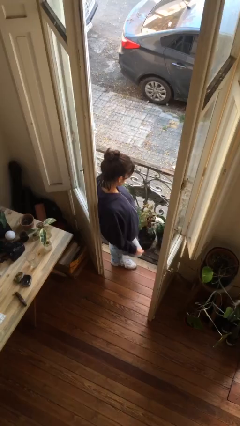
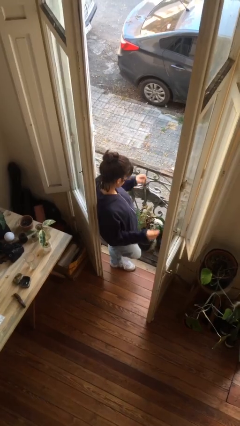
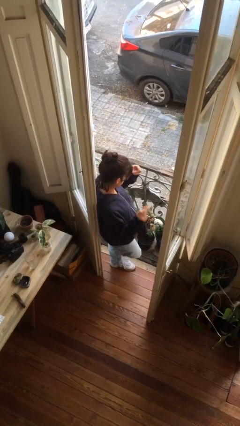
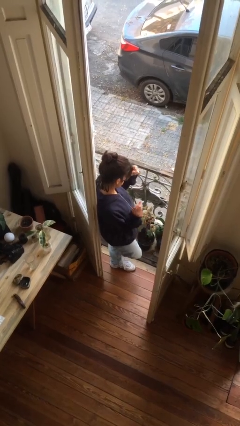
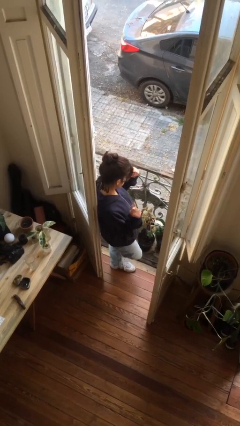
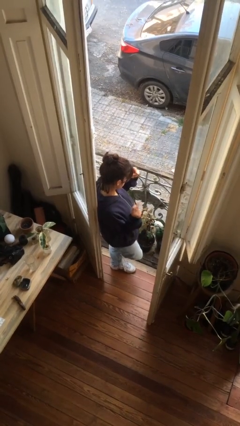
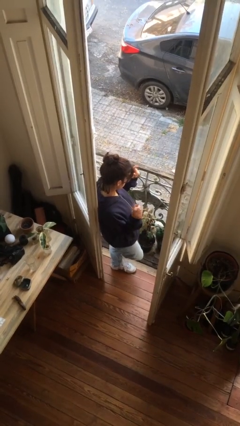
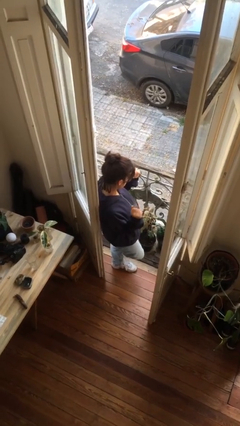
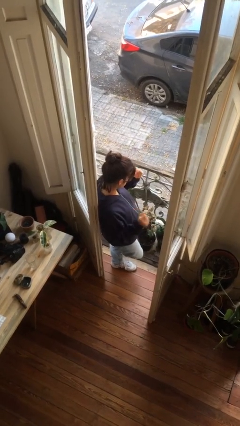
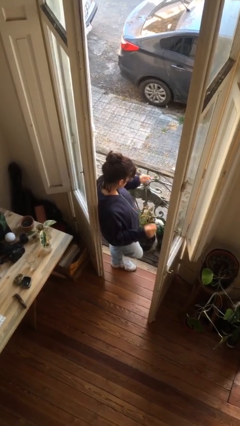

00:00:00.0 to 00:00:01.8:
person snaps fingers

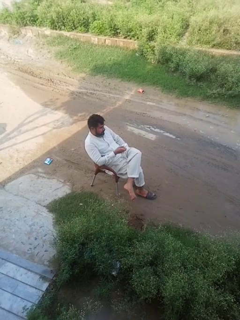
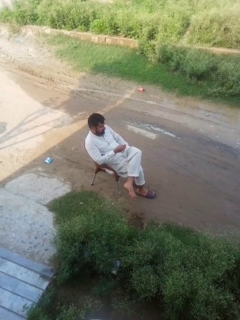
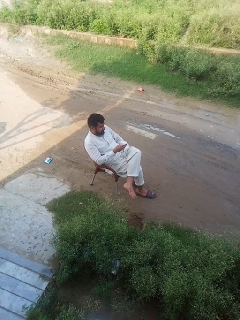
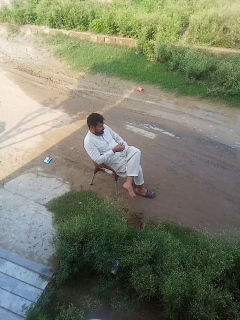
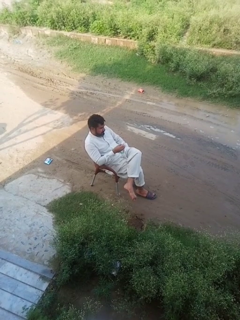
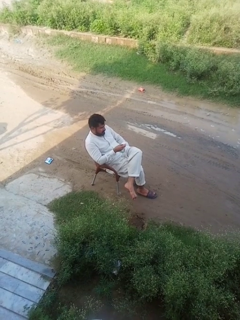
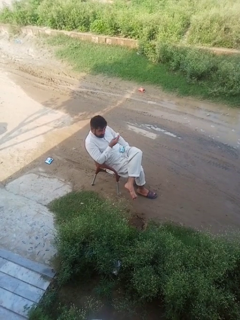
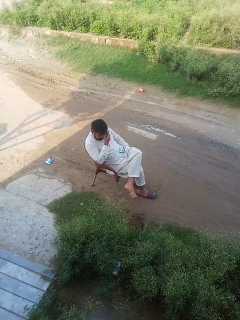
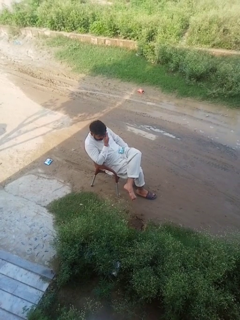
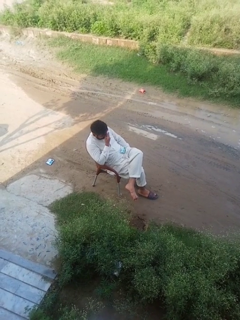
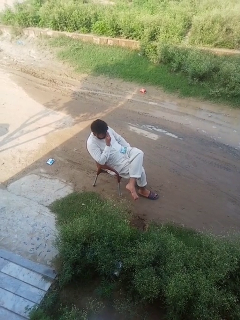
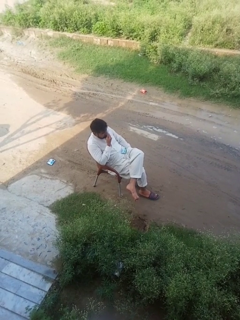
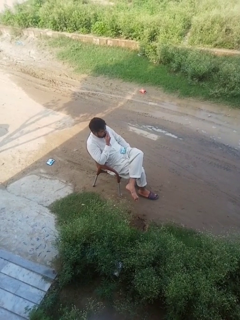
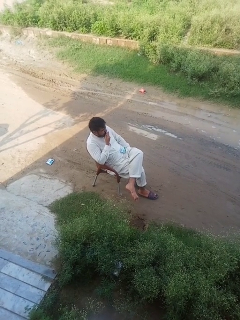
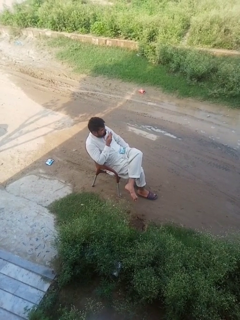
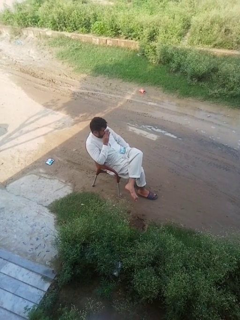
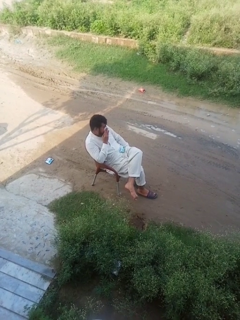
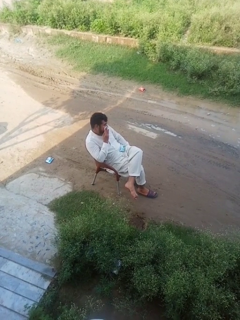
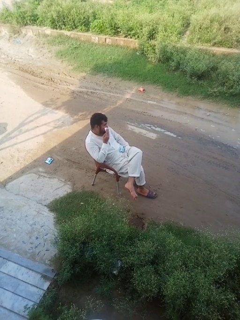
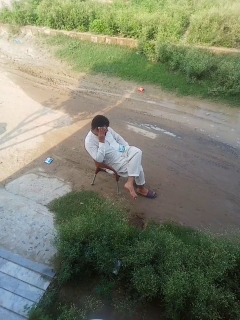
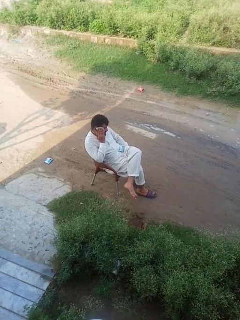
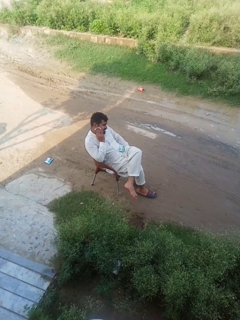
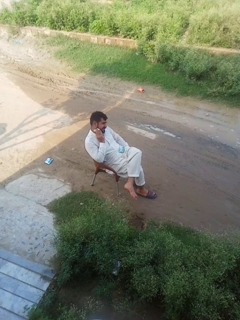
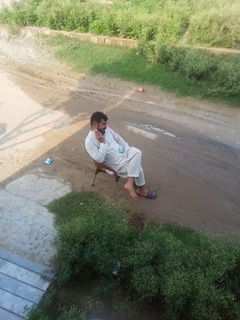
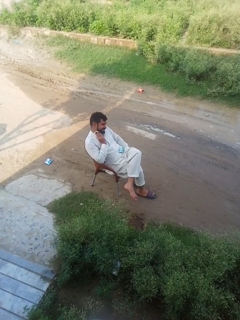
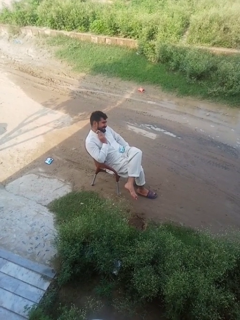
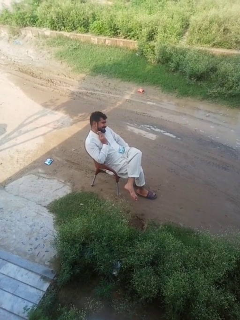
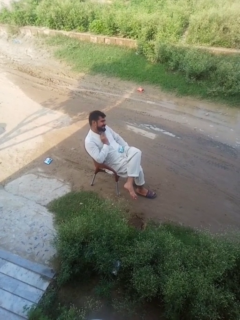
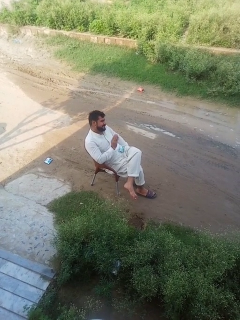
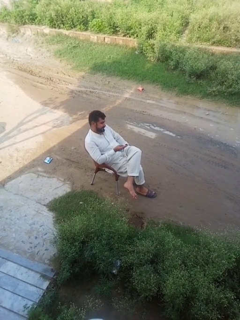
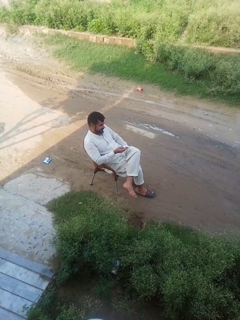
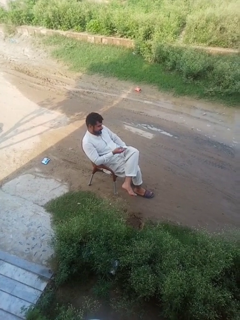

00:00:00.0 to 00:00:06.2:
person wipes mouth with napkin

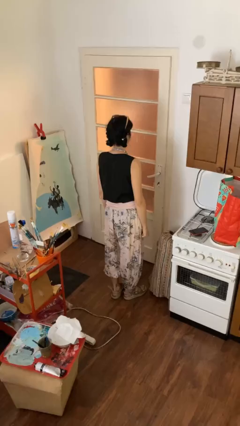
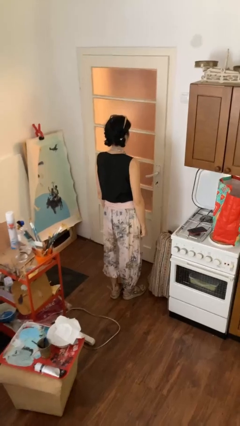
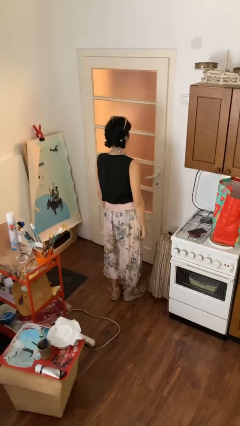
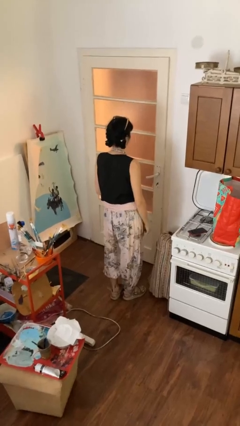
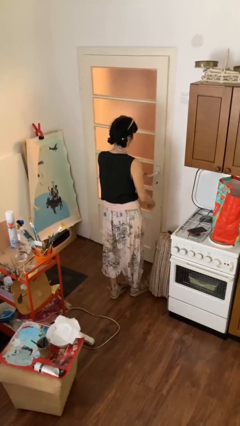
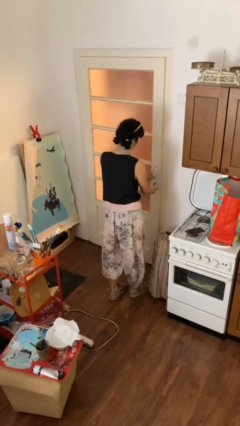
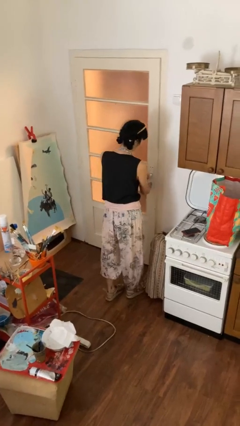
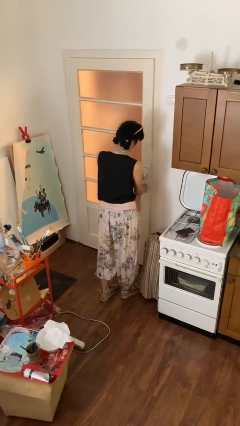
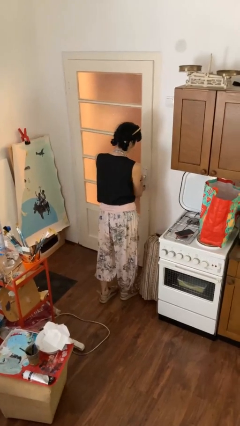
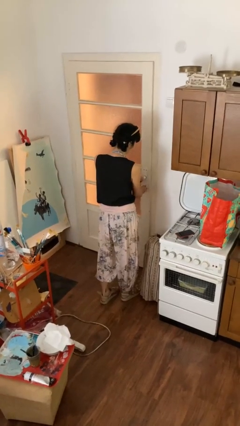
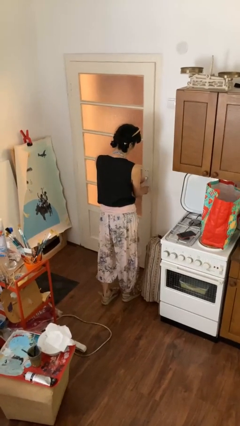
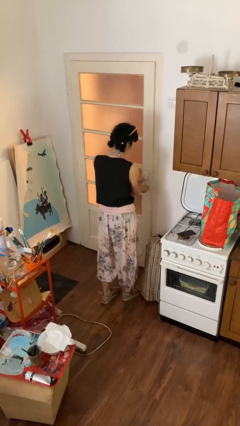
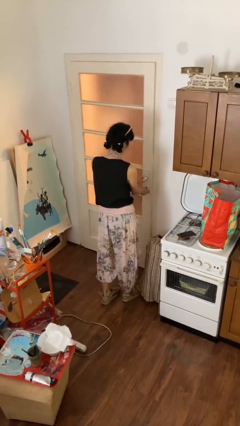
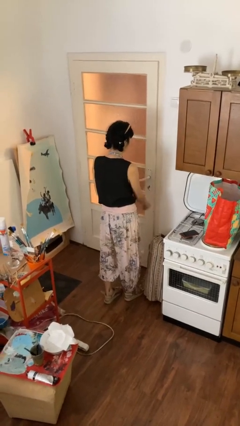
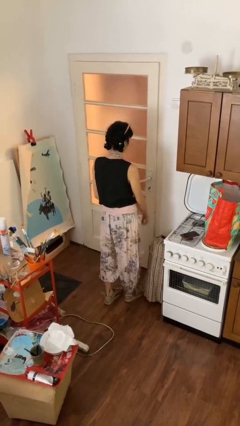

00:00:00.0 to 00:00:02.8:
person unlocks door with keys

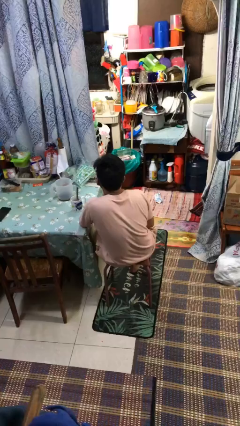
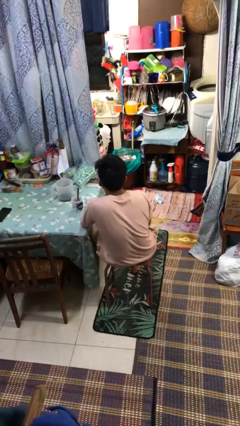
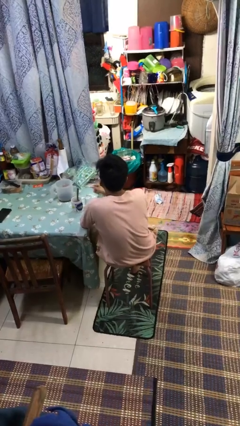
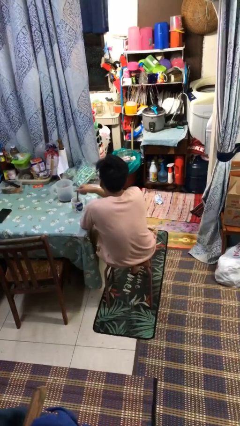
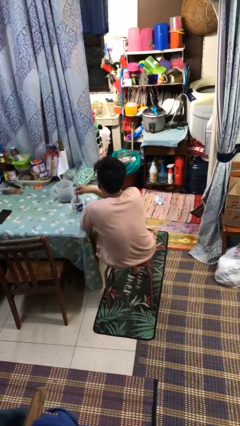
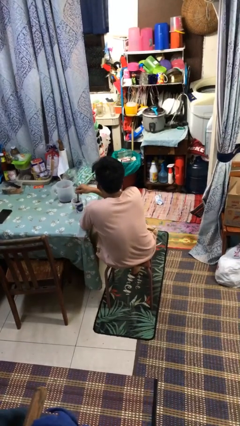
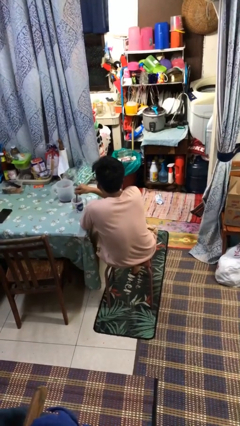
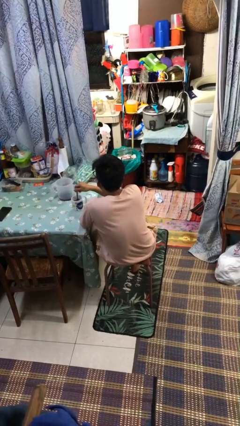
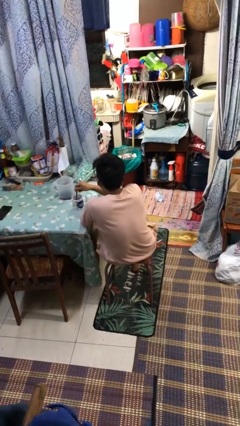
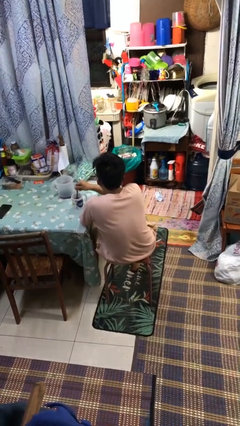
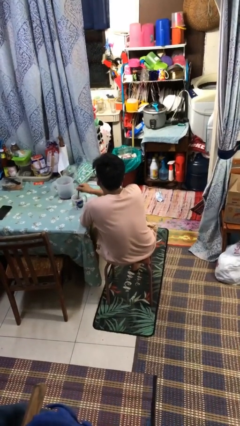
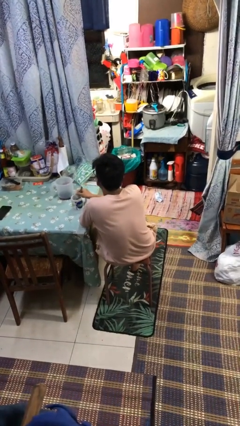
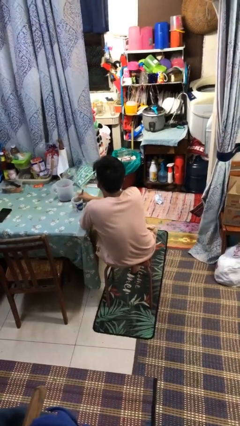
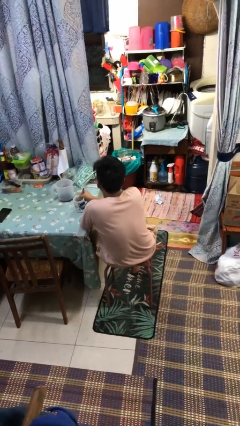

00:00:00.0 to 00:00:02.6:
person stirs mug

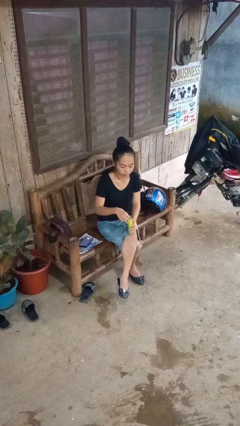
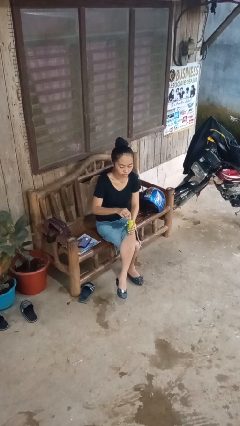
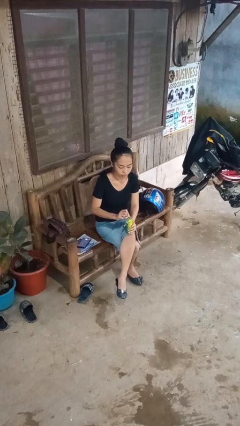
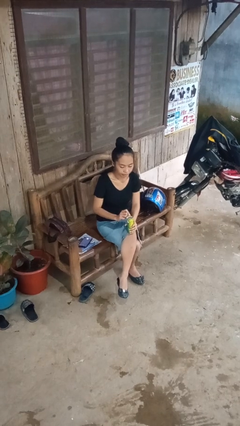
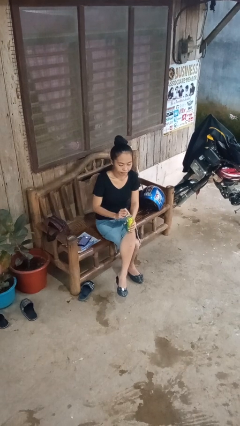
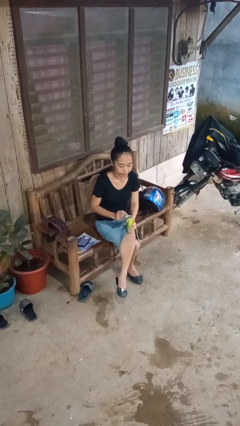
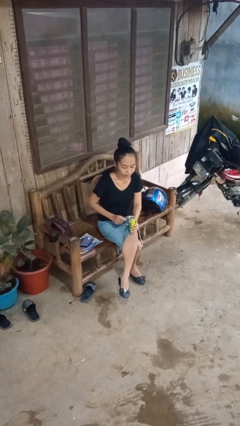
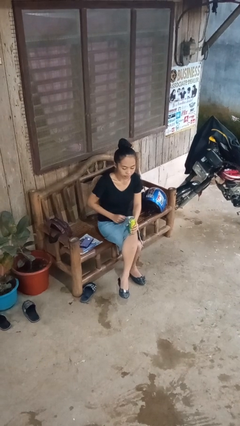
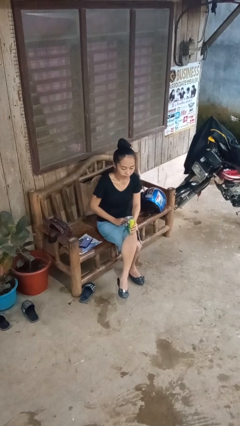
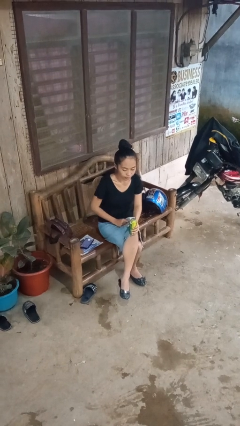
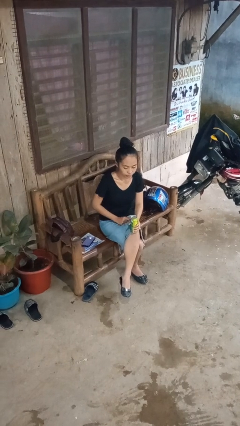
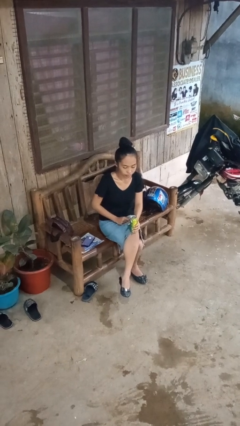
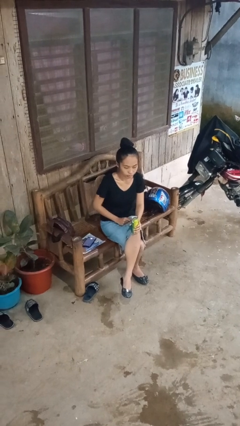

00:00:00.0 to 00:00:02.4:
person opens beverage can

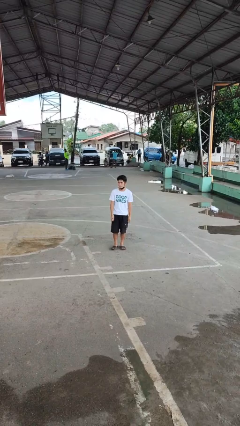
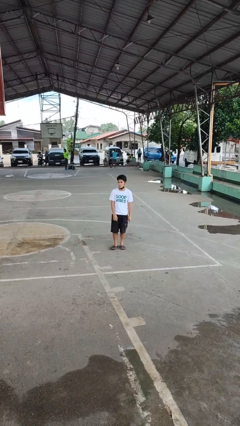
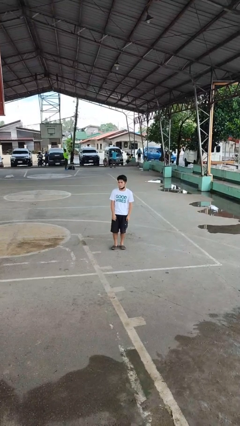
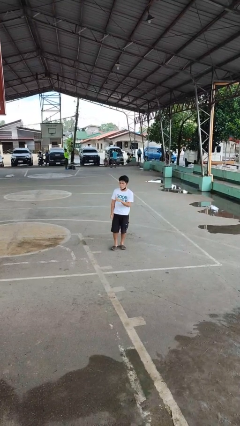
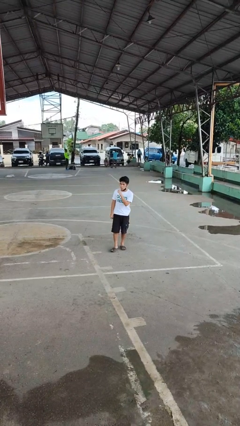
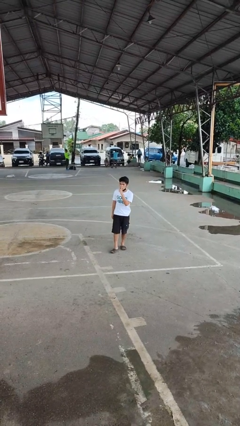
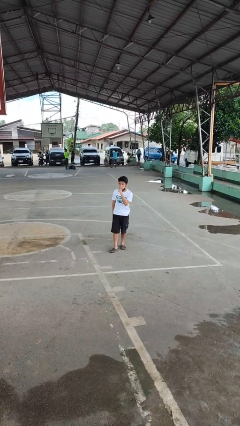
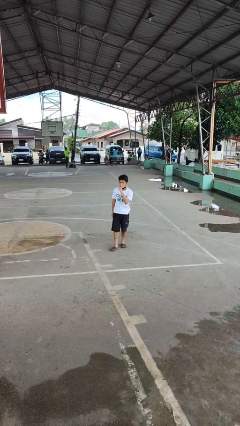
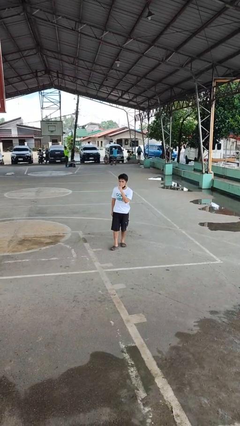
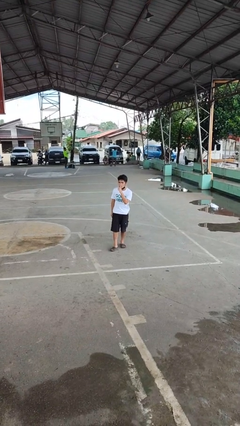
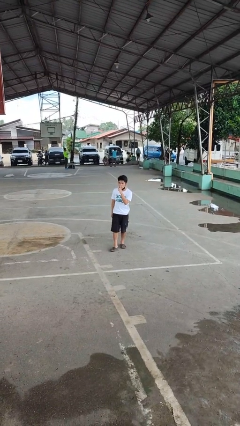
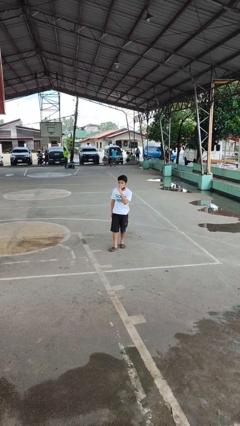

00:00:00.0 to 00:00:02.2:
person gestures be quiet

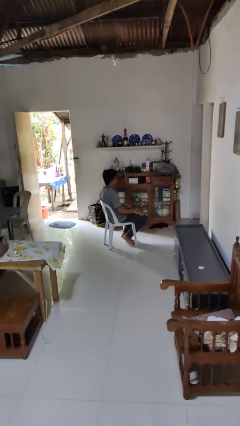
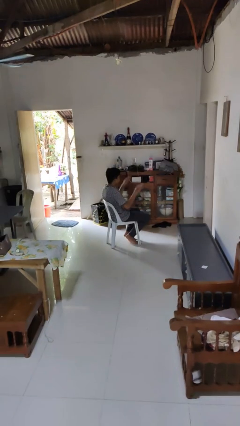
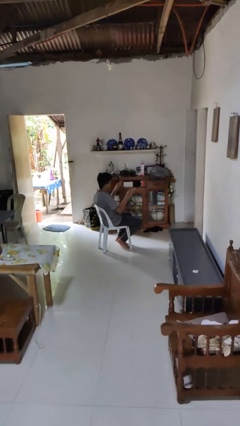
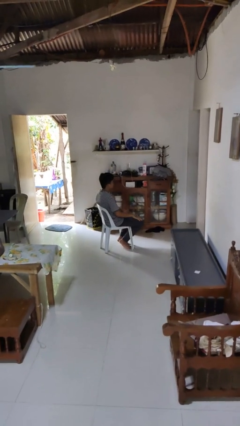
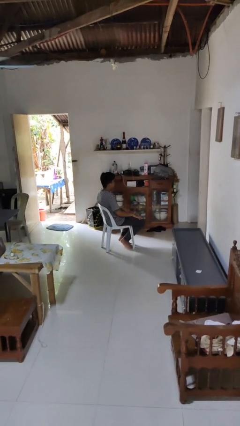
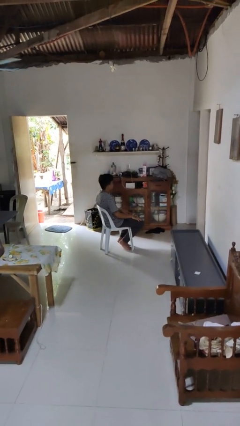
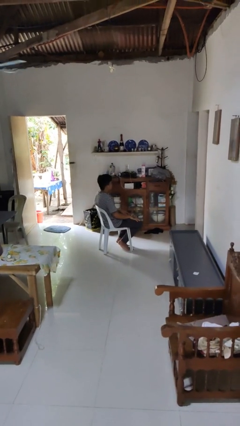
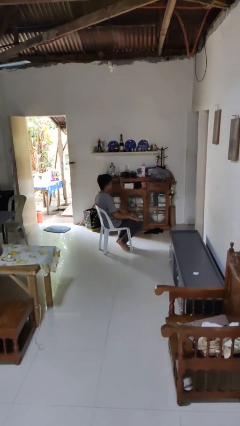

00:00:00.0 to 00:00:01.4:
person slaps hands on thighs
